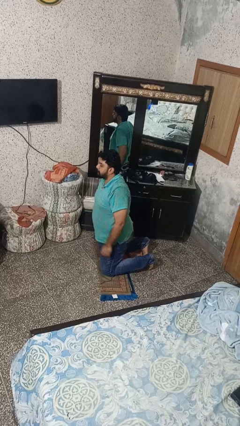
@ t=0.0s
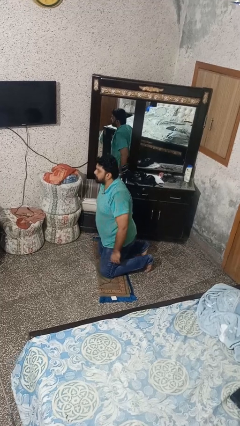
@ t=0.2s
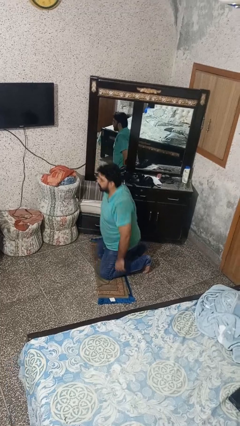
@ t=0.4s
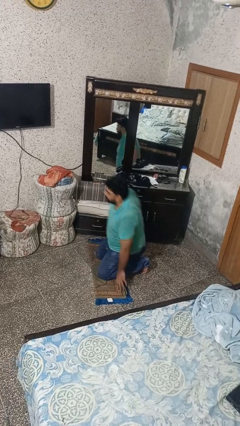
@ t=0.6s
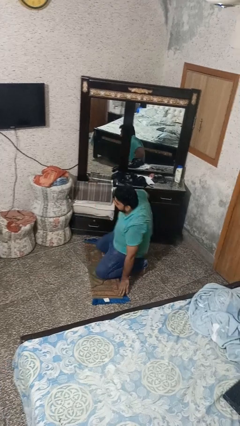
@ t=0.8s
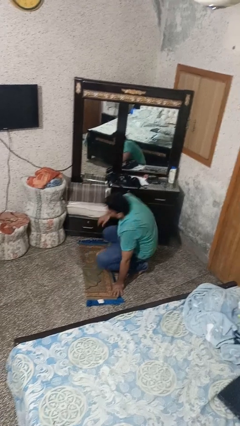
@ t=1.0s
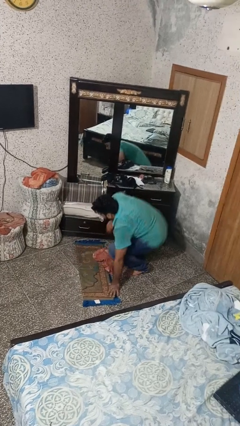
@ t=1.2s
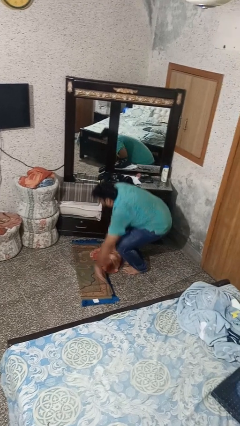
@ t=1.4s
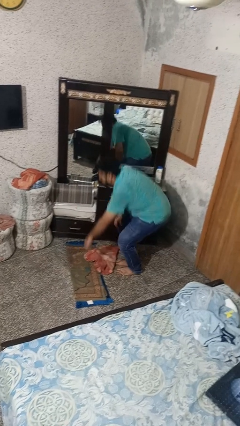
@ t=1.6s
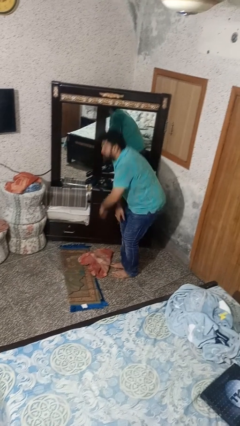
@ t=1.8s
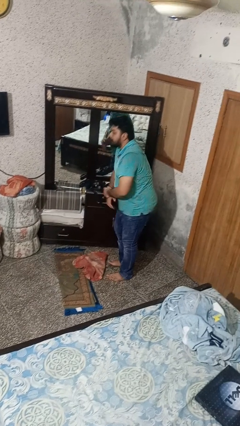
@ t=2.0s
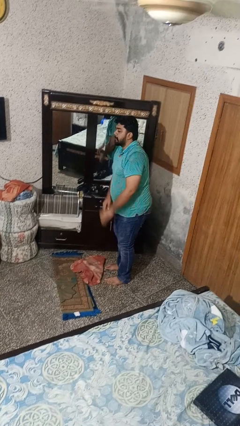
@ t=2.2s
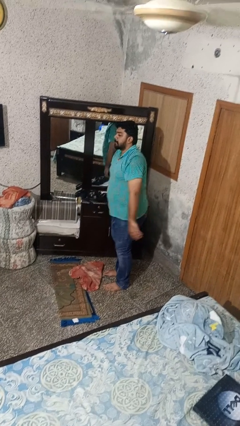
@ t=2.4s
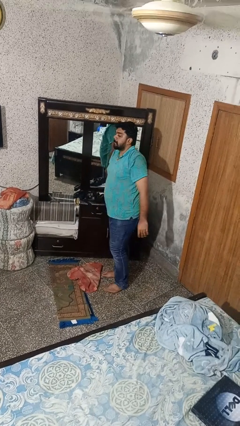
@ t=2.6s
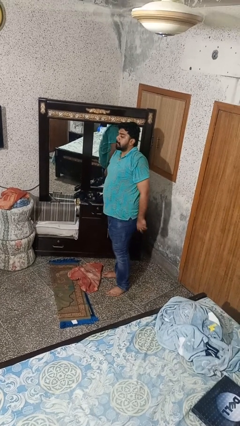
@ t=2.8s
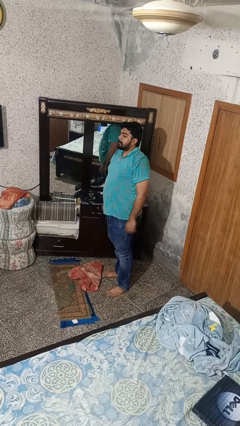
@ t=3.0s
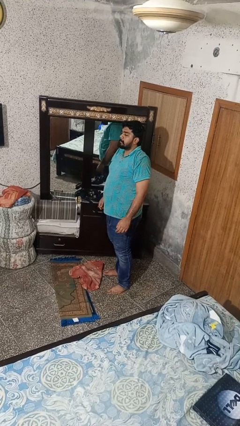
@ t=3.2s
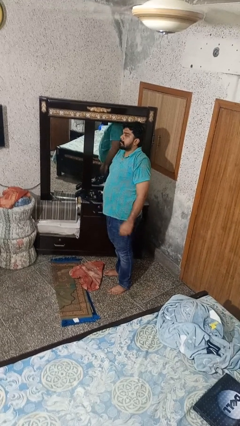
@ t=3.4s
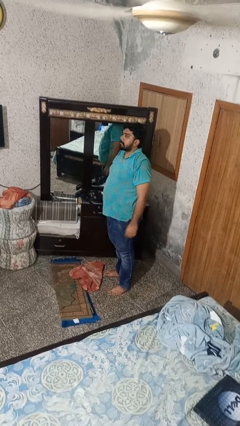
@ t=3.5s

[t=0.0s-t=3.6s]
person stands up from floor

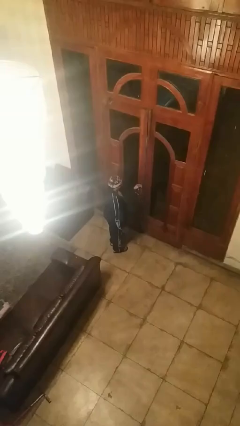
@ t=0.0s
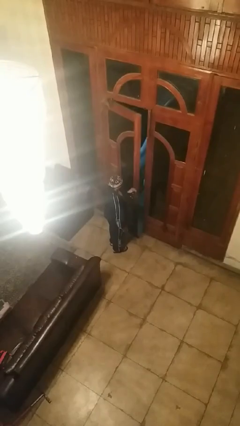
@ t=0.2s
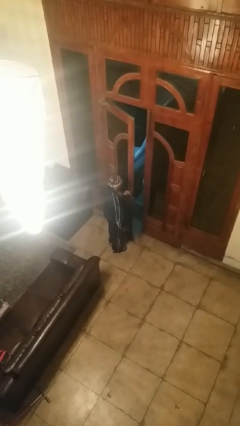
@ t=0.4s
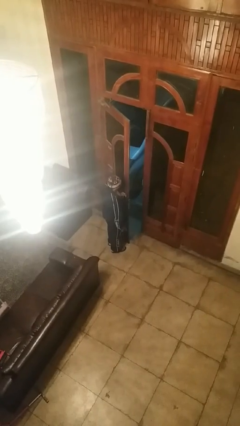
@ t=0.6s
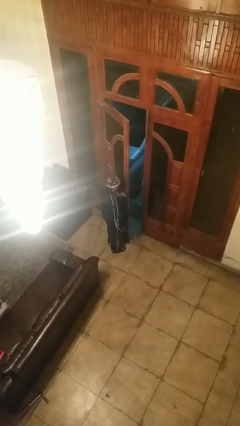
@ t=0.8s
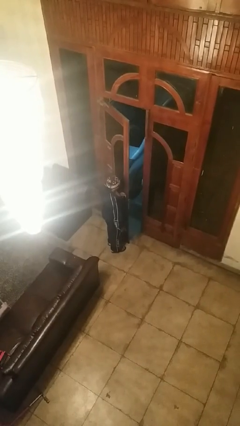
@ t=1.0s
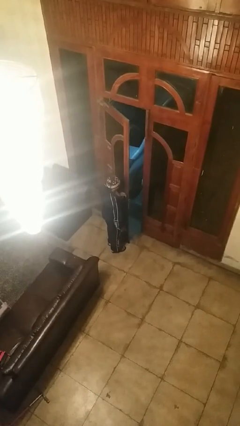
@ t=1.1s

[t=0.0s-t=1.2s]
person opens facility door

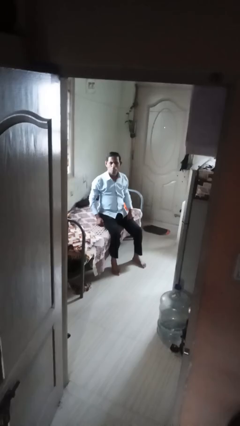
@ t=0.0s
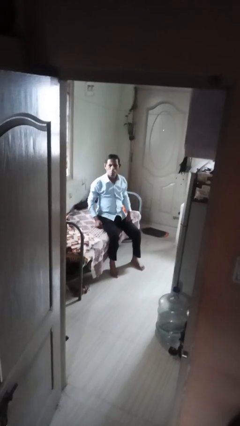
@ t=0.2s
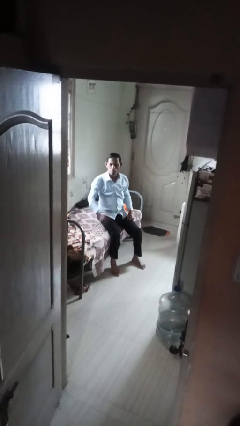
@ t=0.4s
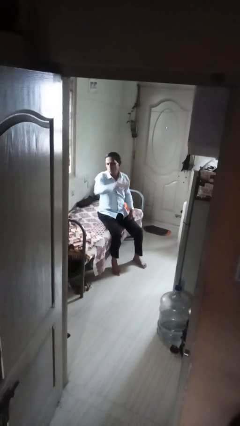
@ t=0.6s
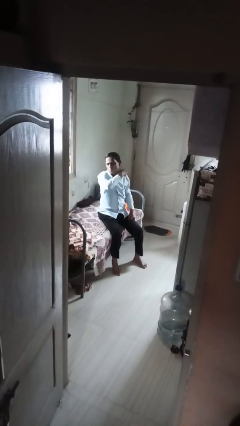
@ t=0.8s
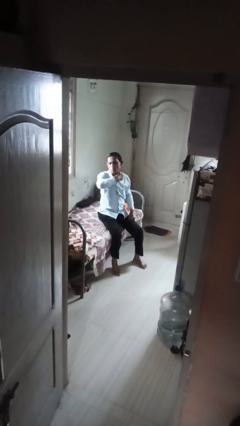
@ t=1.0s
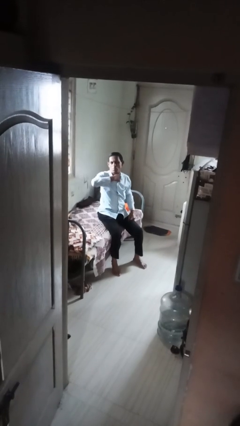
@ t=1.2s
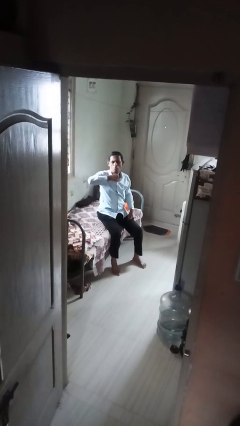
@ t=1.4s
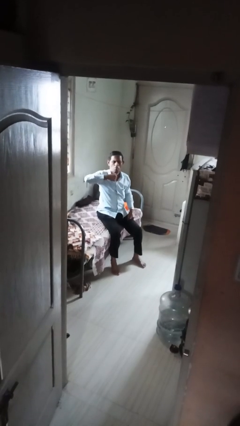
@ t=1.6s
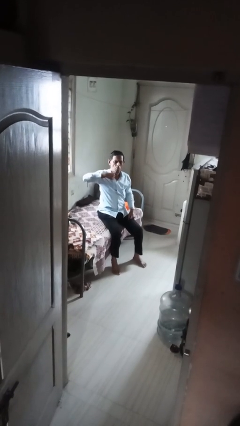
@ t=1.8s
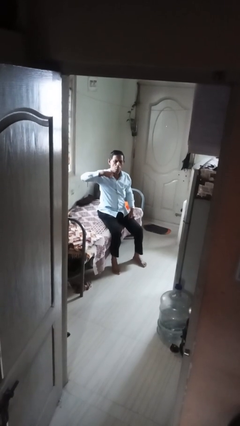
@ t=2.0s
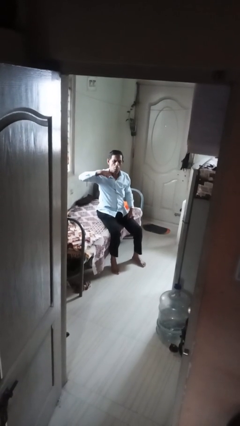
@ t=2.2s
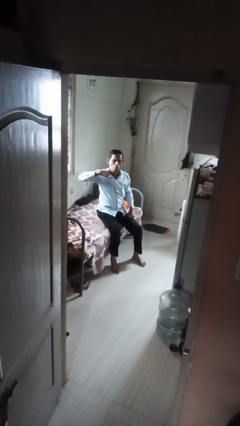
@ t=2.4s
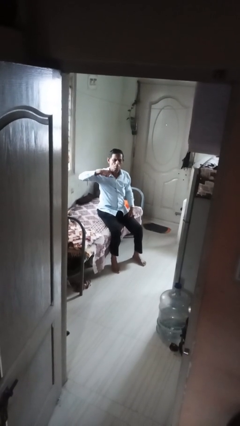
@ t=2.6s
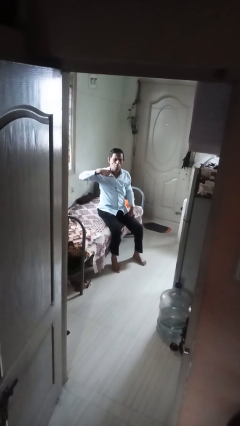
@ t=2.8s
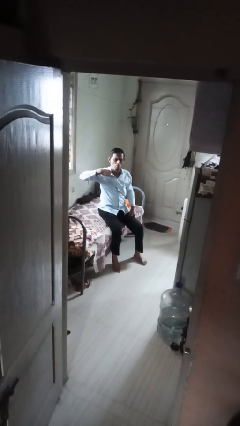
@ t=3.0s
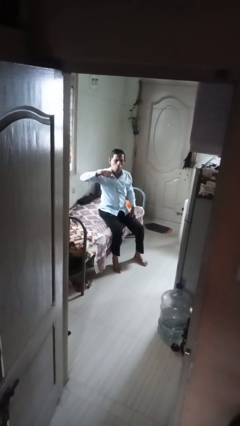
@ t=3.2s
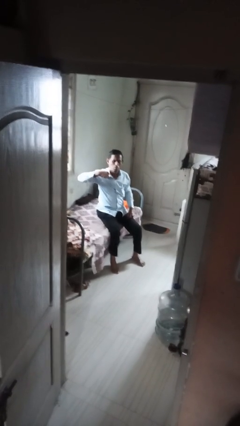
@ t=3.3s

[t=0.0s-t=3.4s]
person gestures cut

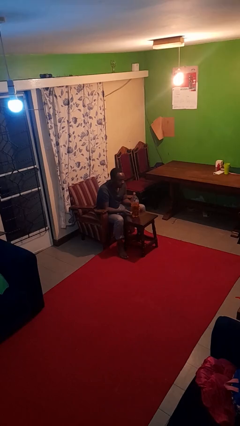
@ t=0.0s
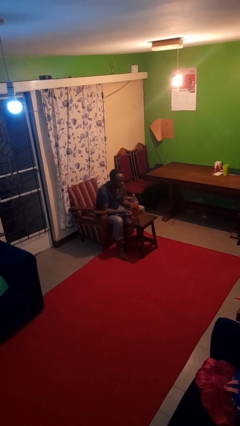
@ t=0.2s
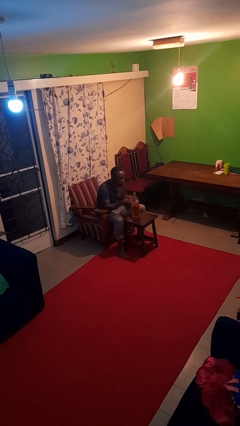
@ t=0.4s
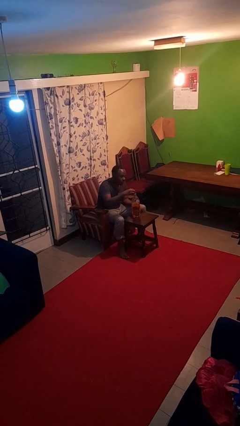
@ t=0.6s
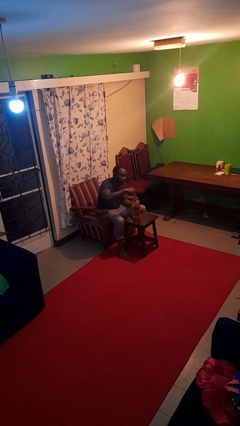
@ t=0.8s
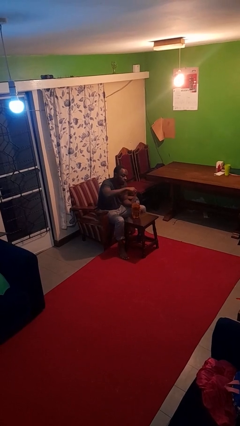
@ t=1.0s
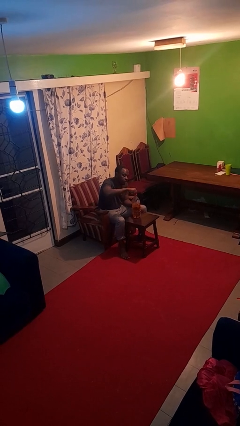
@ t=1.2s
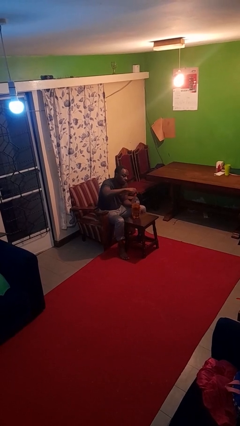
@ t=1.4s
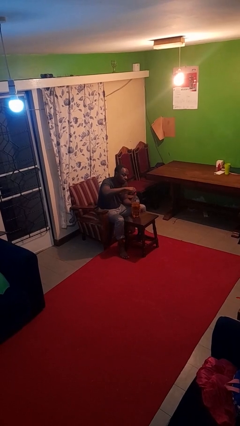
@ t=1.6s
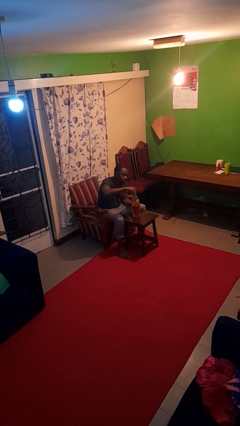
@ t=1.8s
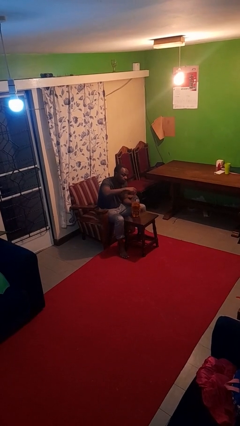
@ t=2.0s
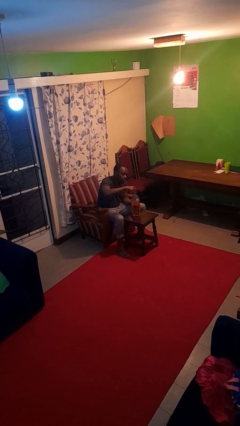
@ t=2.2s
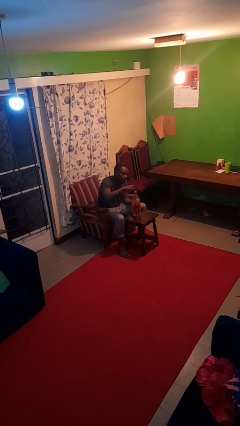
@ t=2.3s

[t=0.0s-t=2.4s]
person screws lid to bottle

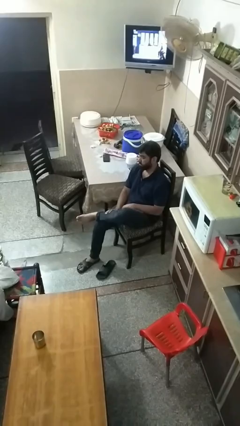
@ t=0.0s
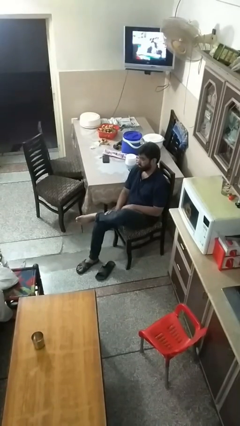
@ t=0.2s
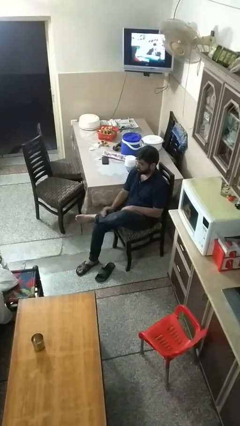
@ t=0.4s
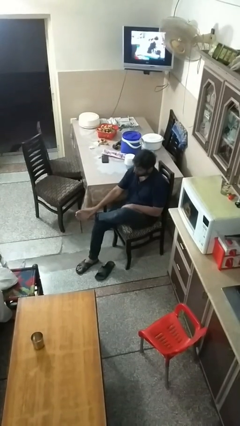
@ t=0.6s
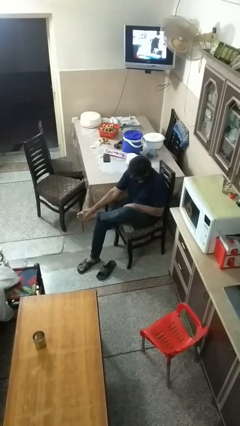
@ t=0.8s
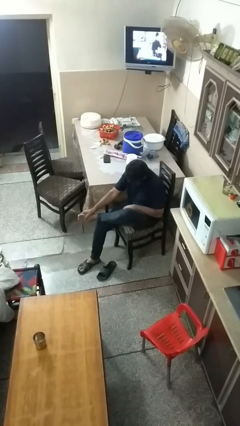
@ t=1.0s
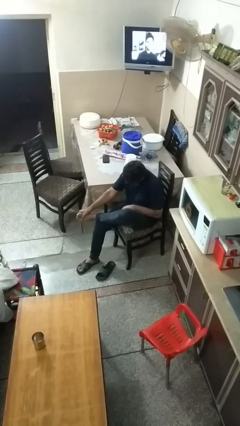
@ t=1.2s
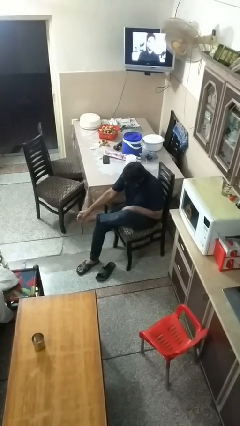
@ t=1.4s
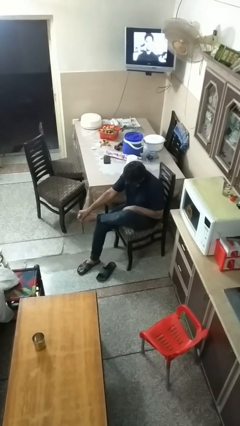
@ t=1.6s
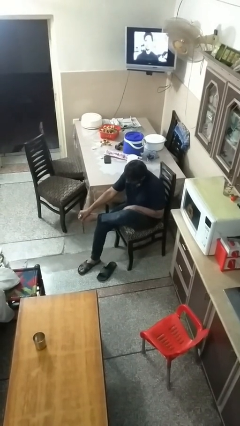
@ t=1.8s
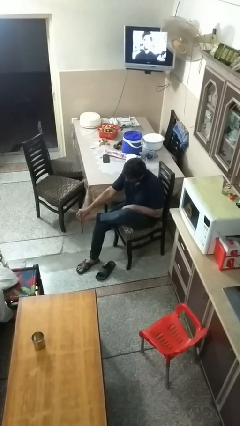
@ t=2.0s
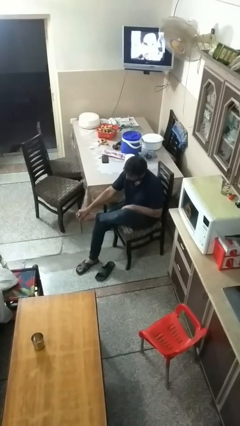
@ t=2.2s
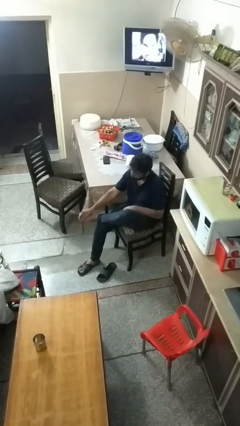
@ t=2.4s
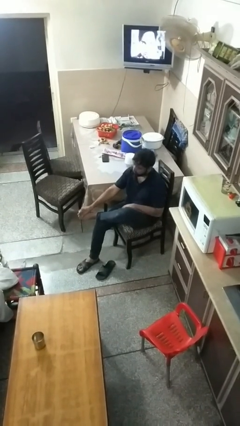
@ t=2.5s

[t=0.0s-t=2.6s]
person rubs foot

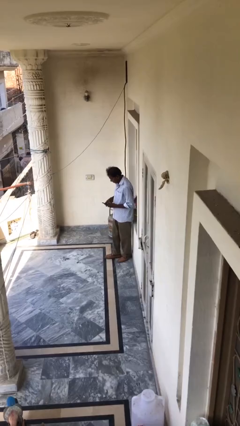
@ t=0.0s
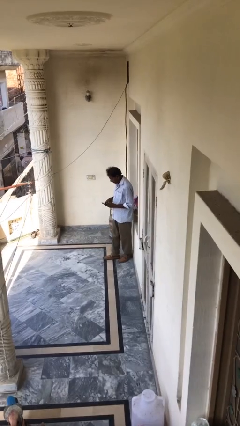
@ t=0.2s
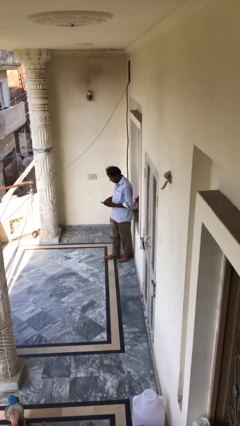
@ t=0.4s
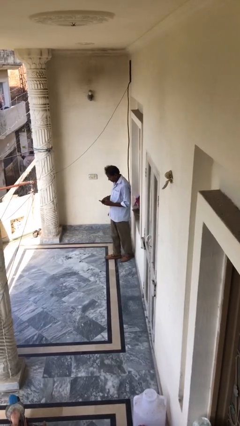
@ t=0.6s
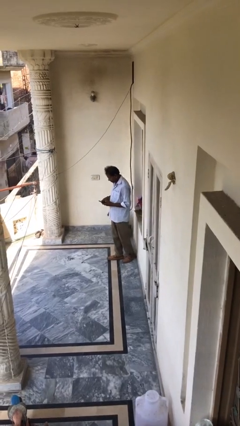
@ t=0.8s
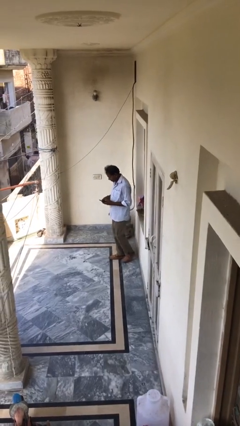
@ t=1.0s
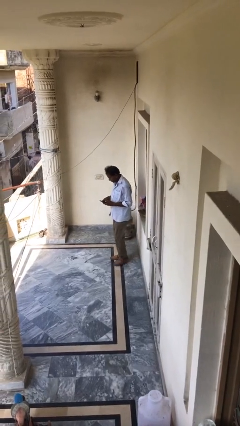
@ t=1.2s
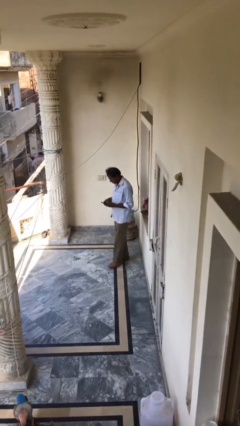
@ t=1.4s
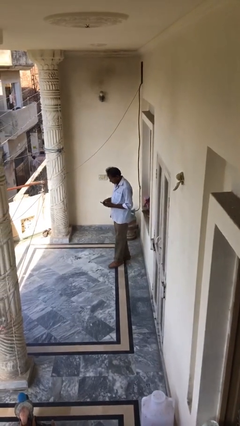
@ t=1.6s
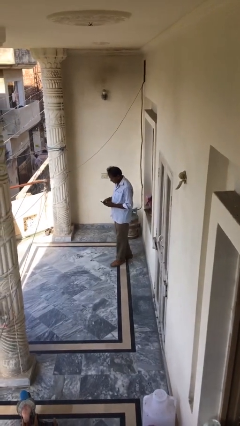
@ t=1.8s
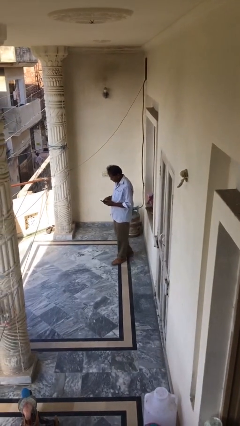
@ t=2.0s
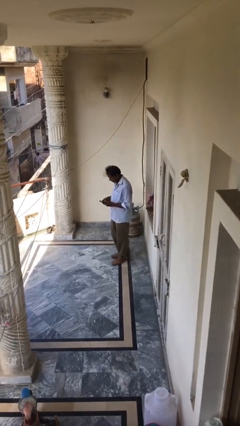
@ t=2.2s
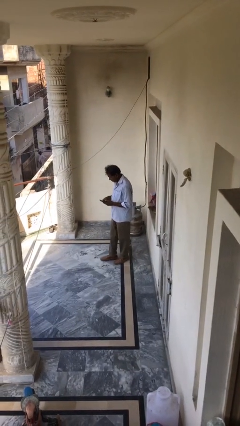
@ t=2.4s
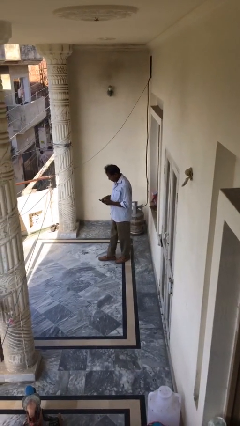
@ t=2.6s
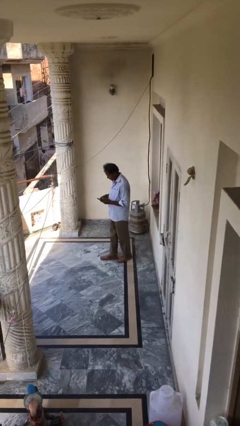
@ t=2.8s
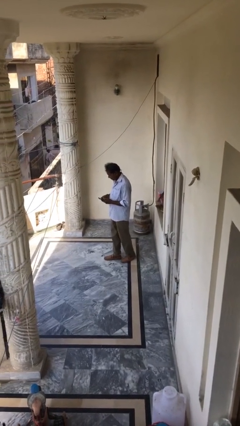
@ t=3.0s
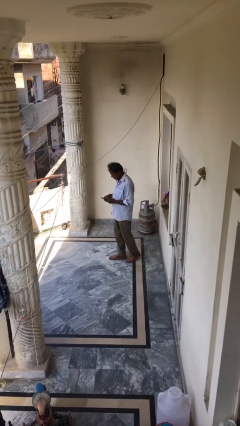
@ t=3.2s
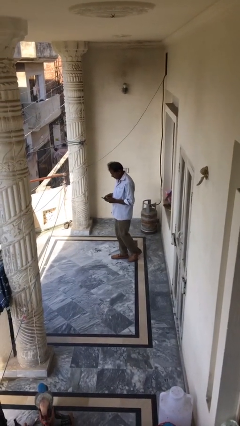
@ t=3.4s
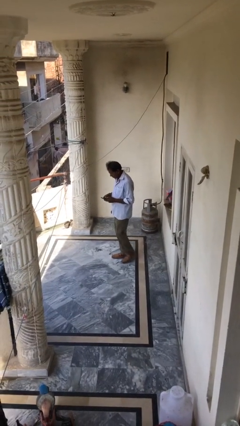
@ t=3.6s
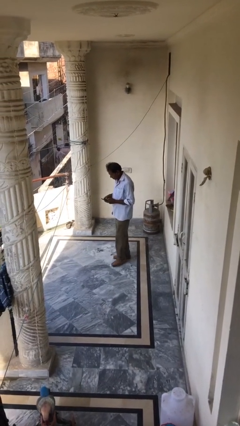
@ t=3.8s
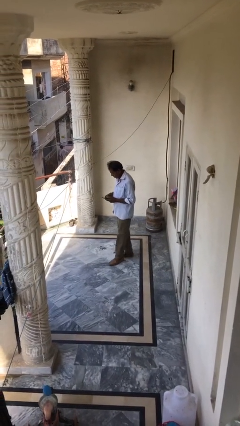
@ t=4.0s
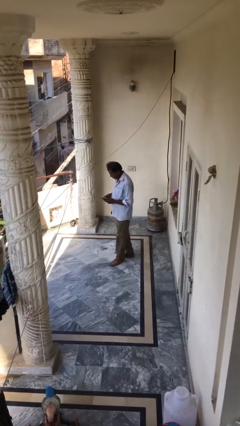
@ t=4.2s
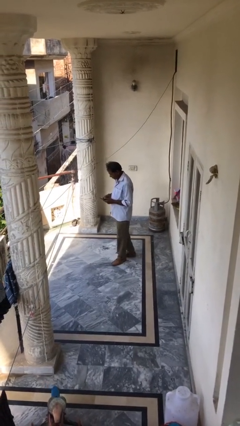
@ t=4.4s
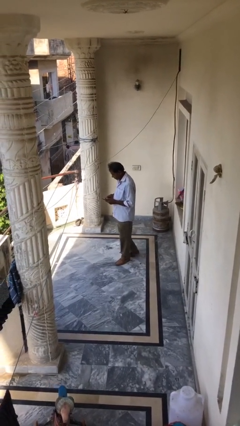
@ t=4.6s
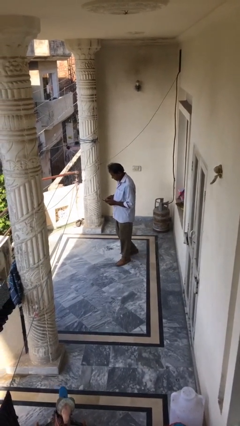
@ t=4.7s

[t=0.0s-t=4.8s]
person texts on phone
